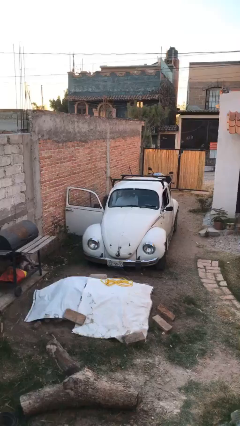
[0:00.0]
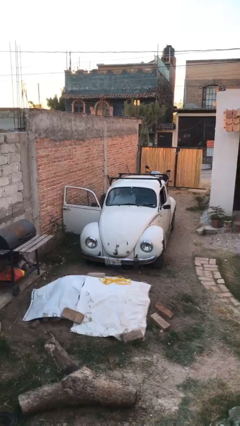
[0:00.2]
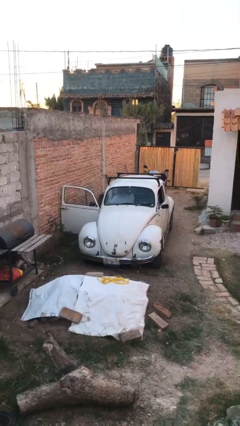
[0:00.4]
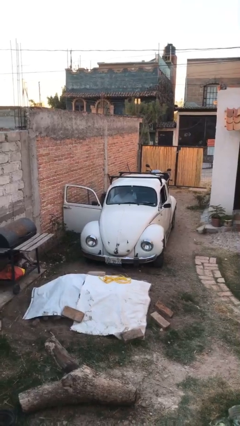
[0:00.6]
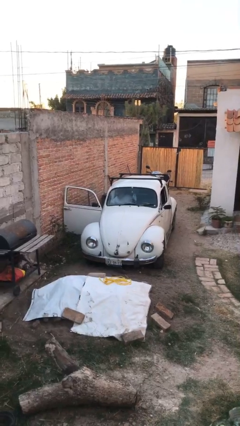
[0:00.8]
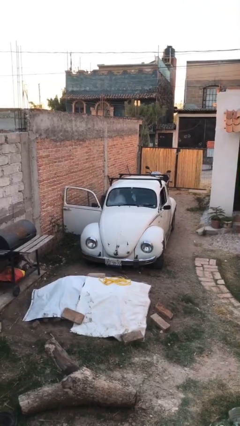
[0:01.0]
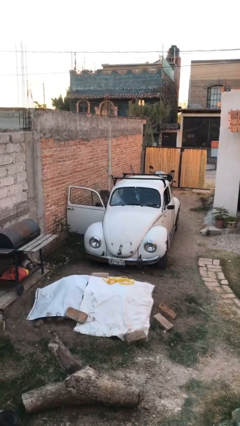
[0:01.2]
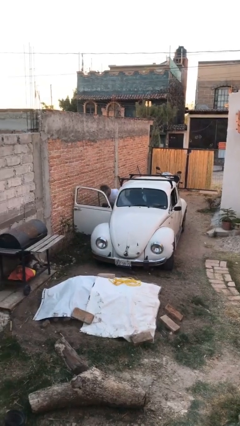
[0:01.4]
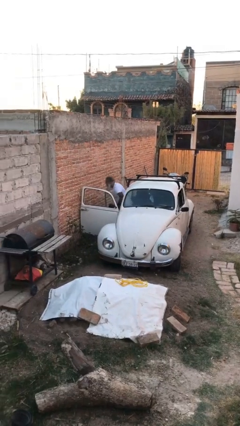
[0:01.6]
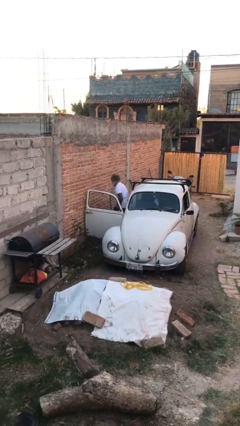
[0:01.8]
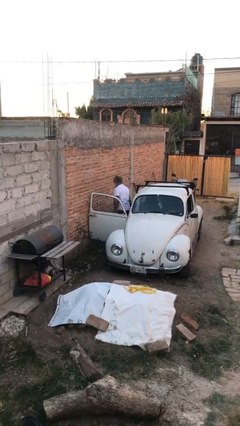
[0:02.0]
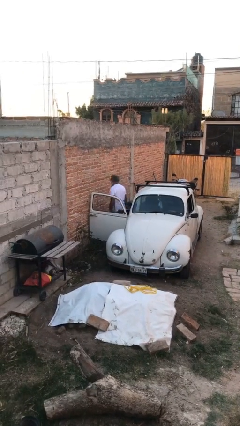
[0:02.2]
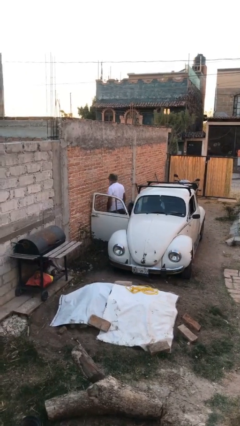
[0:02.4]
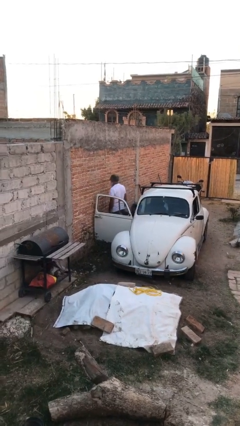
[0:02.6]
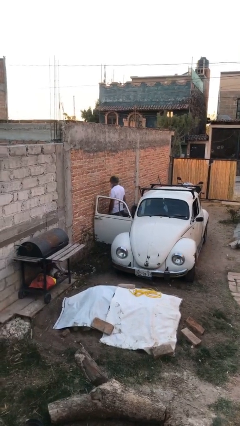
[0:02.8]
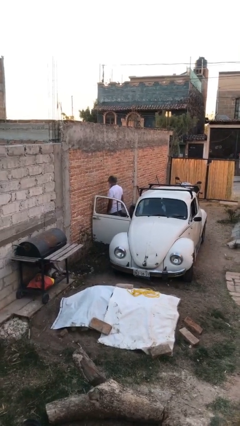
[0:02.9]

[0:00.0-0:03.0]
person exits car

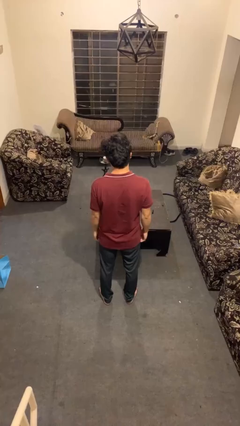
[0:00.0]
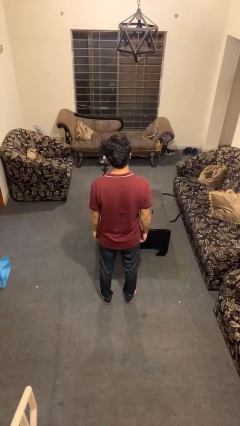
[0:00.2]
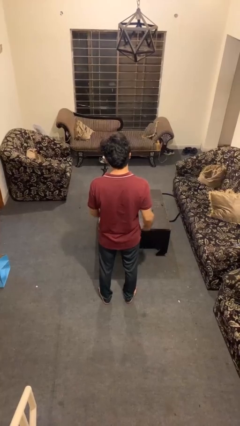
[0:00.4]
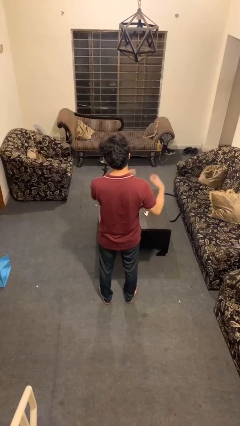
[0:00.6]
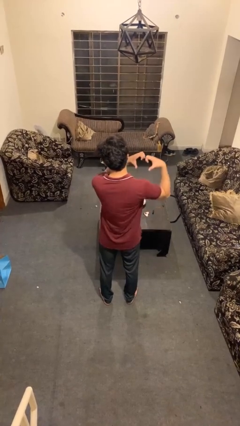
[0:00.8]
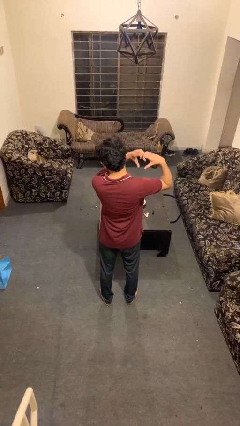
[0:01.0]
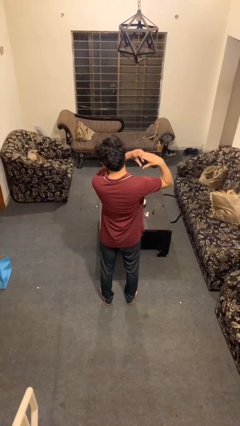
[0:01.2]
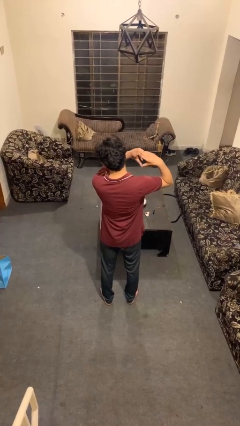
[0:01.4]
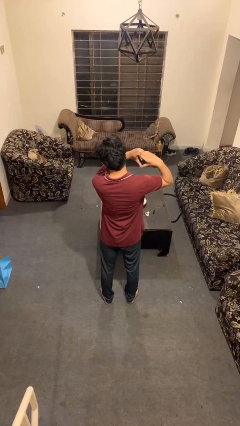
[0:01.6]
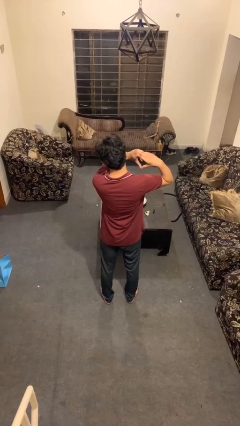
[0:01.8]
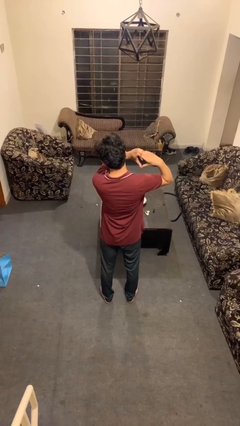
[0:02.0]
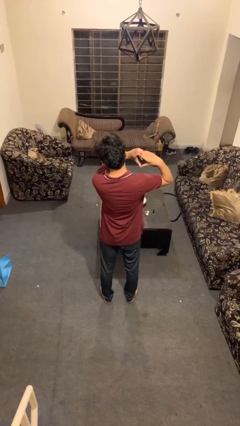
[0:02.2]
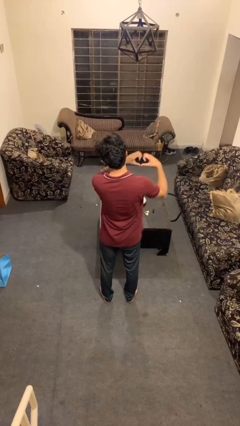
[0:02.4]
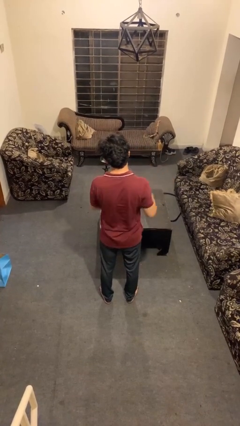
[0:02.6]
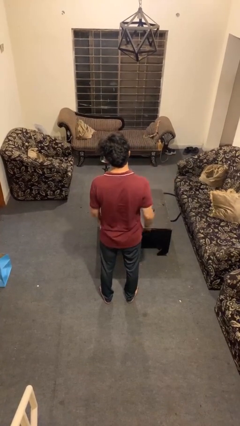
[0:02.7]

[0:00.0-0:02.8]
person gestures heart

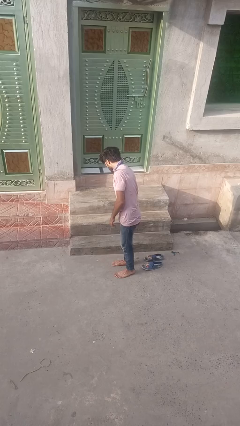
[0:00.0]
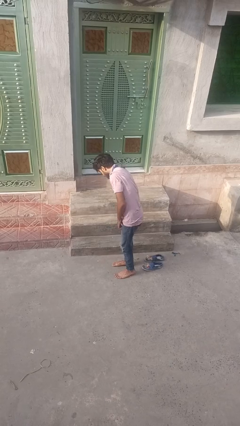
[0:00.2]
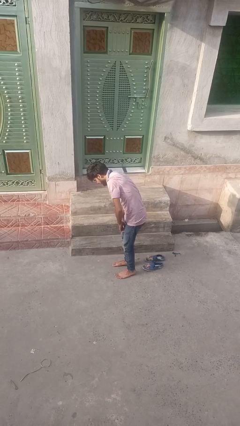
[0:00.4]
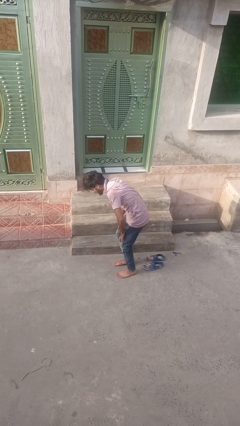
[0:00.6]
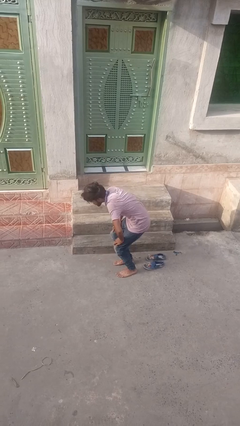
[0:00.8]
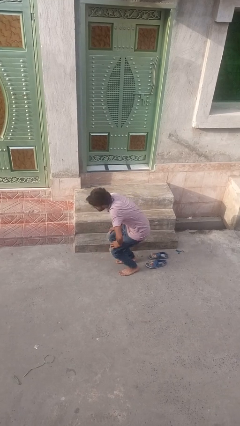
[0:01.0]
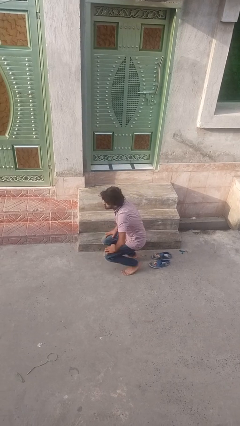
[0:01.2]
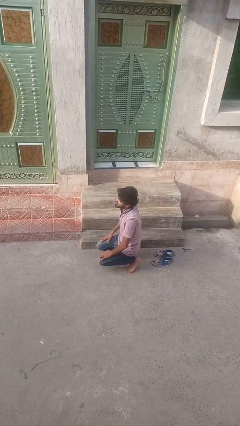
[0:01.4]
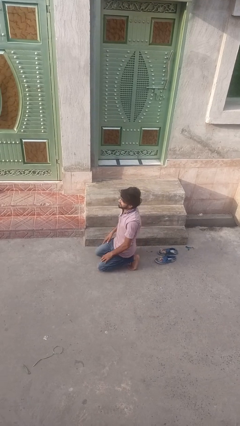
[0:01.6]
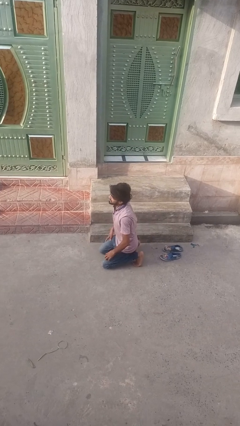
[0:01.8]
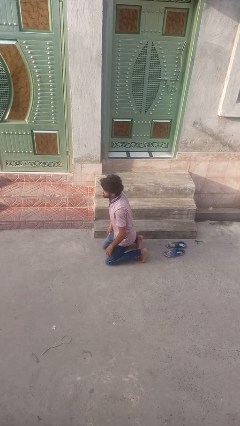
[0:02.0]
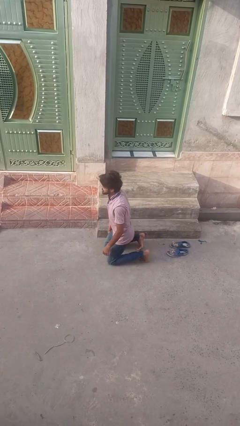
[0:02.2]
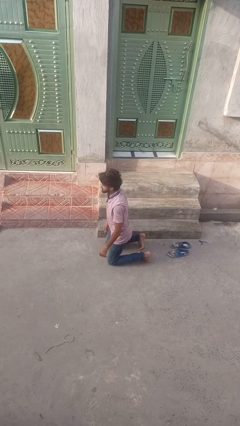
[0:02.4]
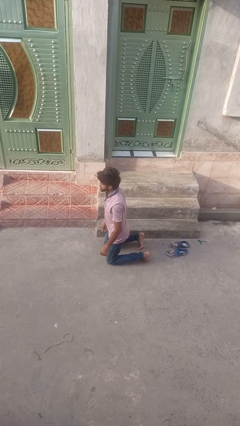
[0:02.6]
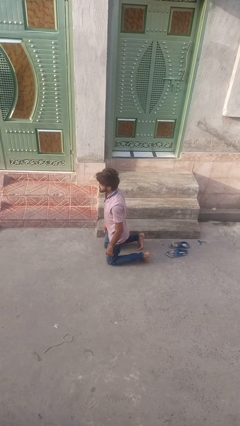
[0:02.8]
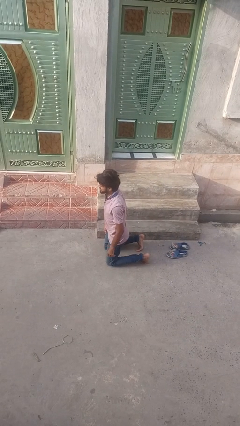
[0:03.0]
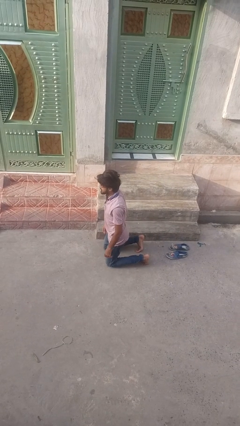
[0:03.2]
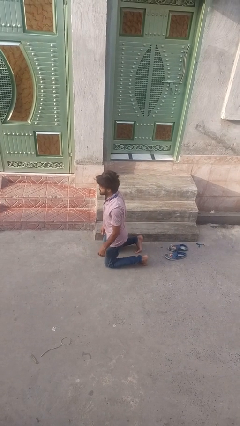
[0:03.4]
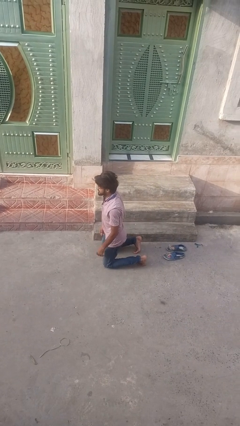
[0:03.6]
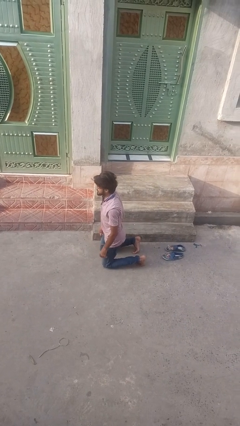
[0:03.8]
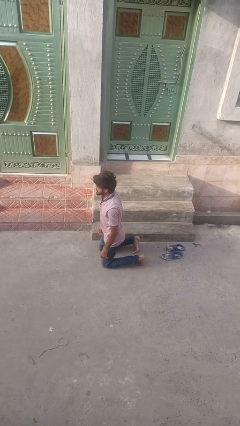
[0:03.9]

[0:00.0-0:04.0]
person kneels

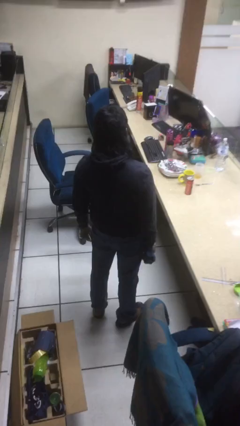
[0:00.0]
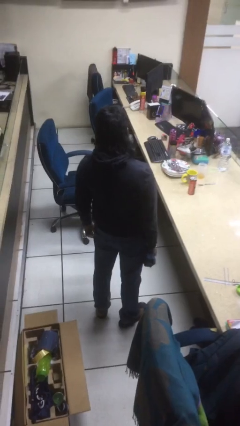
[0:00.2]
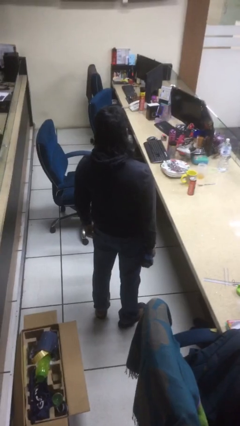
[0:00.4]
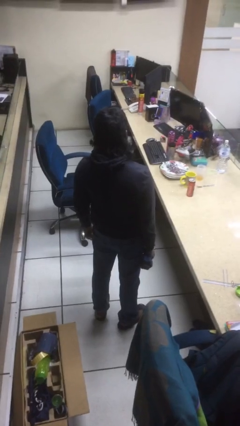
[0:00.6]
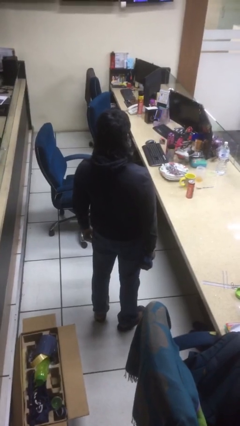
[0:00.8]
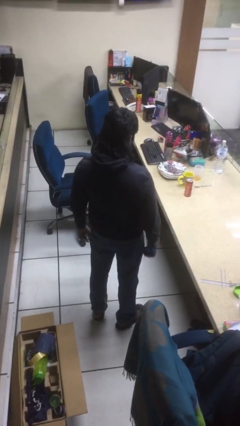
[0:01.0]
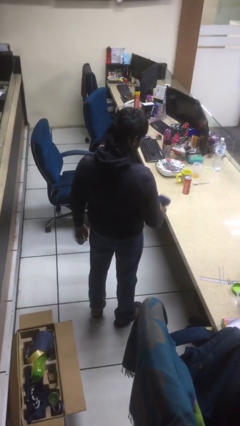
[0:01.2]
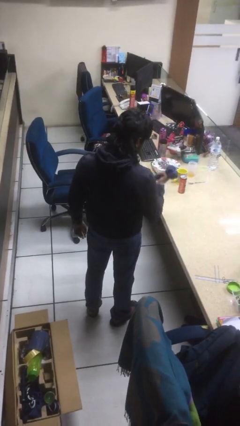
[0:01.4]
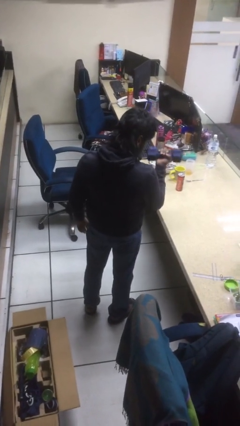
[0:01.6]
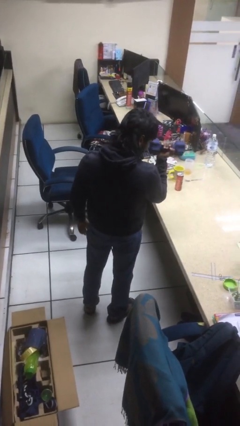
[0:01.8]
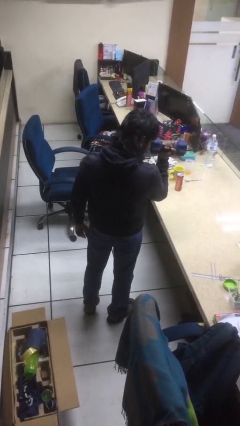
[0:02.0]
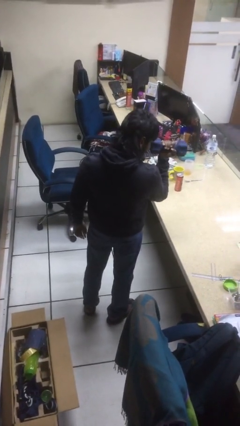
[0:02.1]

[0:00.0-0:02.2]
person lifts dumbbells

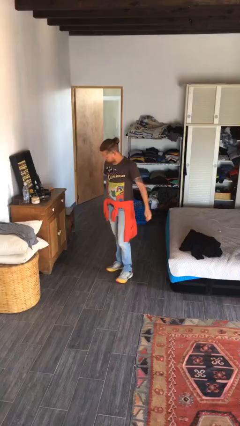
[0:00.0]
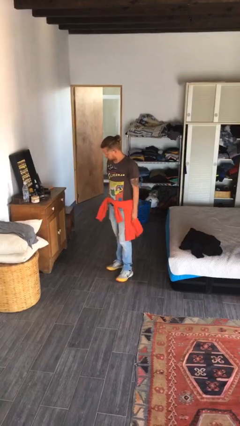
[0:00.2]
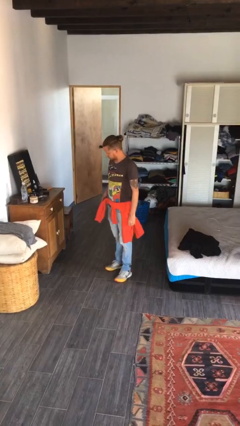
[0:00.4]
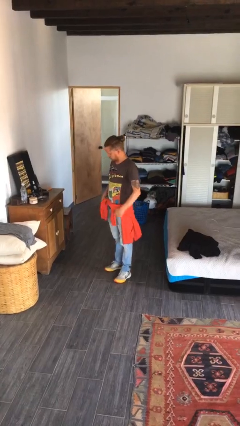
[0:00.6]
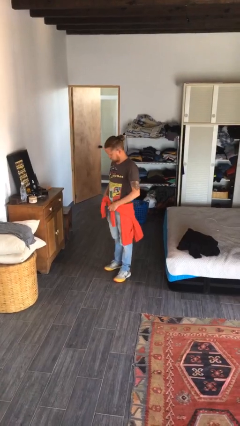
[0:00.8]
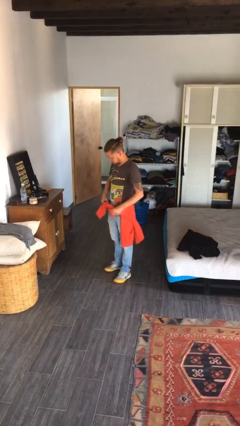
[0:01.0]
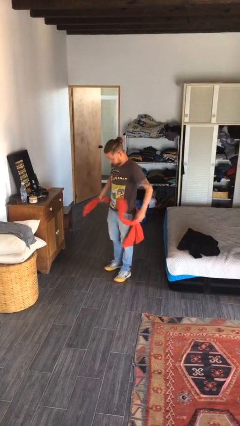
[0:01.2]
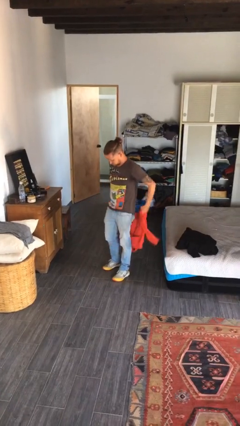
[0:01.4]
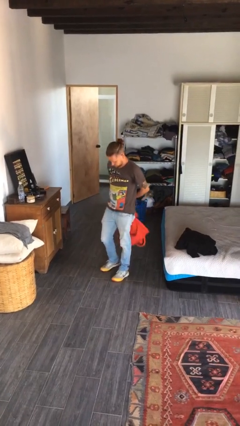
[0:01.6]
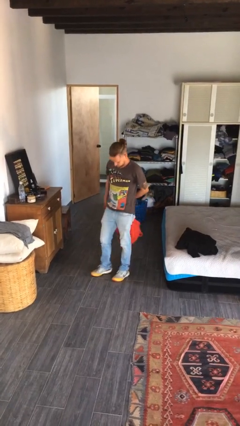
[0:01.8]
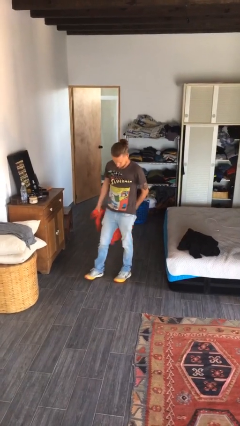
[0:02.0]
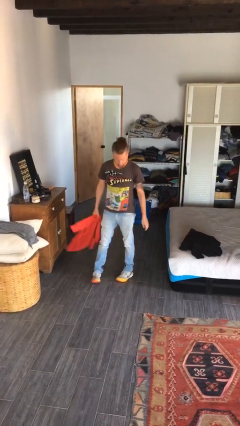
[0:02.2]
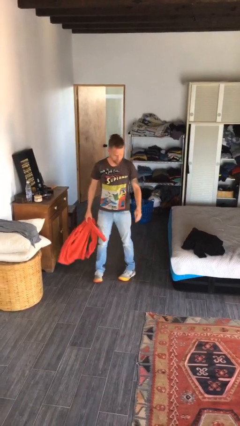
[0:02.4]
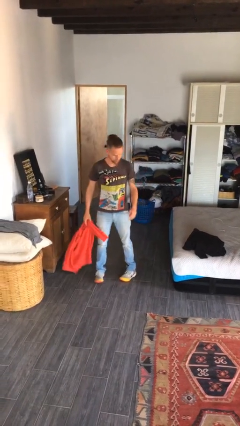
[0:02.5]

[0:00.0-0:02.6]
person unties jacket around waist

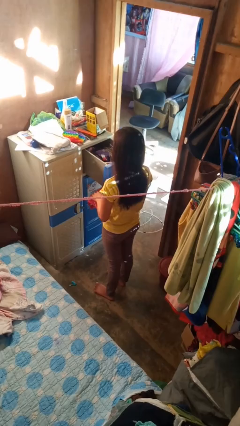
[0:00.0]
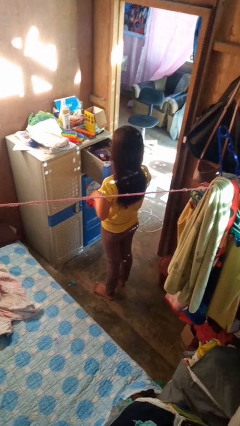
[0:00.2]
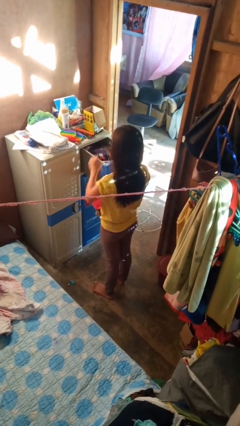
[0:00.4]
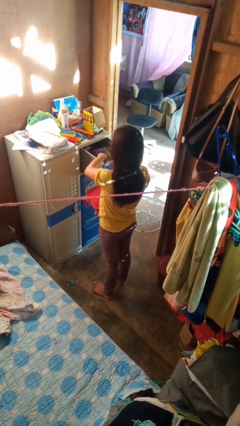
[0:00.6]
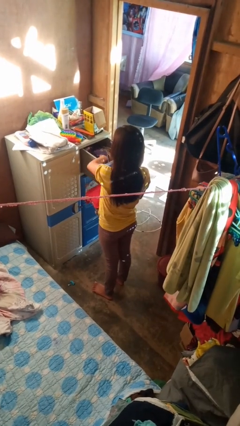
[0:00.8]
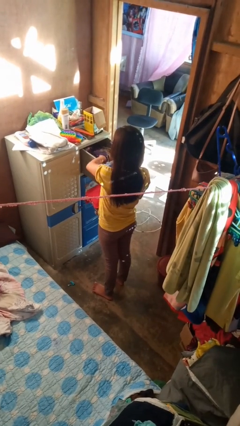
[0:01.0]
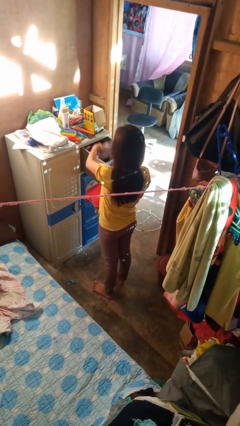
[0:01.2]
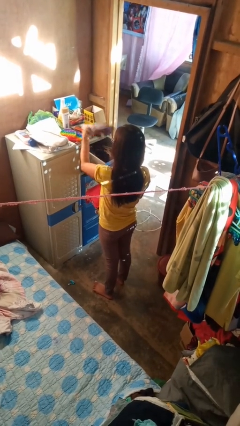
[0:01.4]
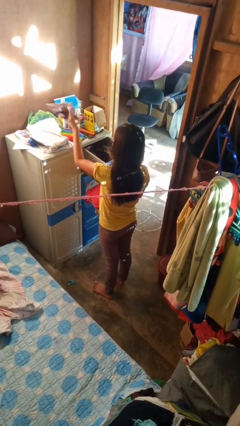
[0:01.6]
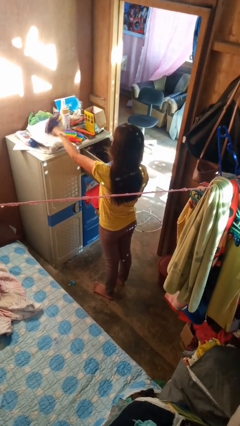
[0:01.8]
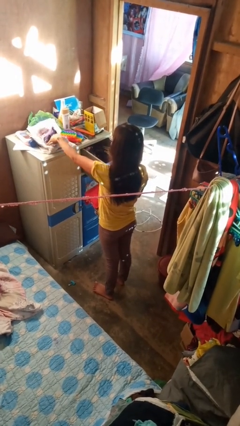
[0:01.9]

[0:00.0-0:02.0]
person takes clothes from dresser

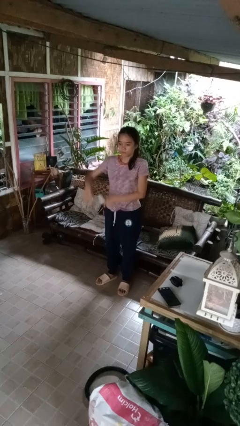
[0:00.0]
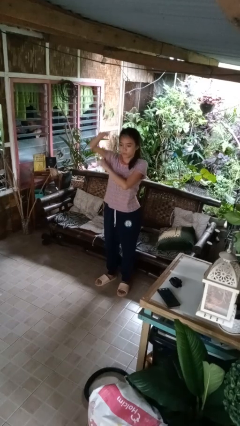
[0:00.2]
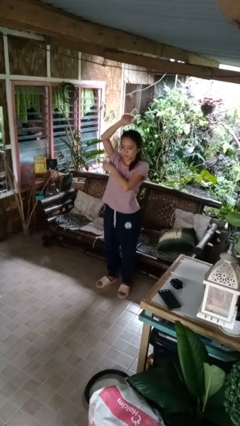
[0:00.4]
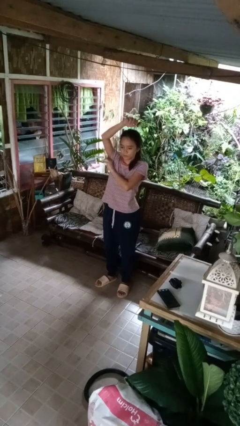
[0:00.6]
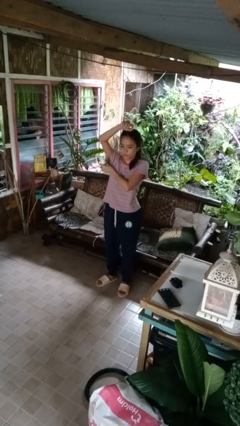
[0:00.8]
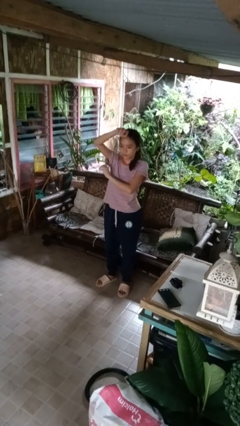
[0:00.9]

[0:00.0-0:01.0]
person applies deodorant
